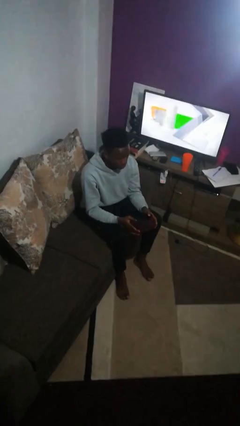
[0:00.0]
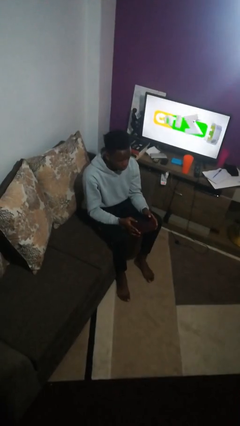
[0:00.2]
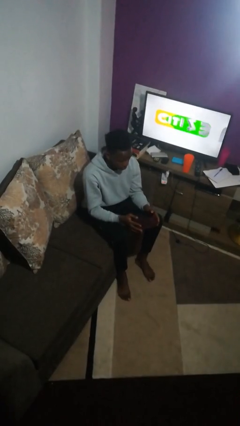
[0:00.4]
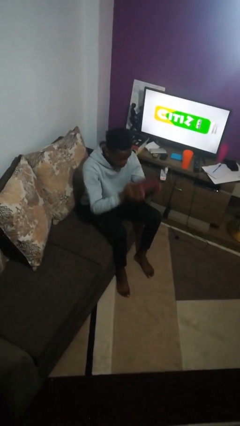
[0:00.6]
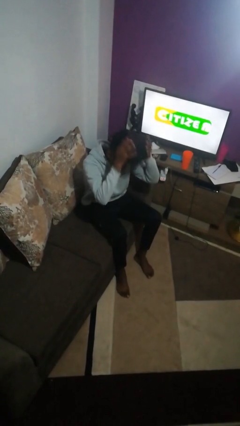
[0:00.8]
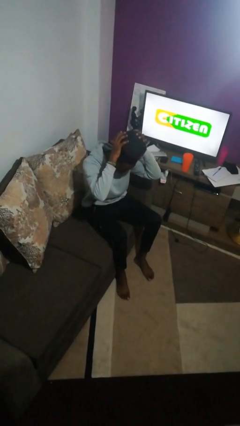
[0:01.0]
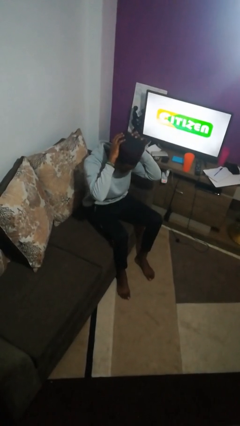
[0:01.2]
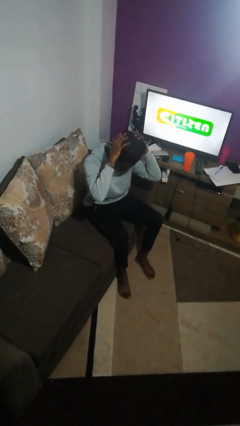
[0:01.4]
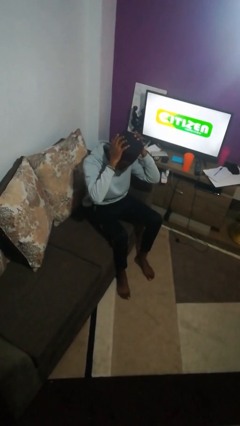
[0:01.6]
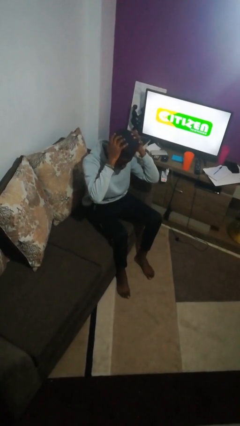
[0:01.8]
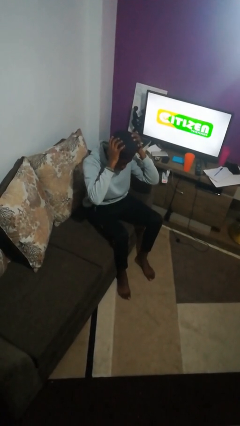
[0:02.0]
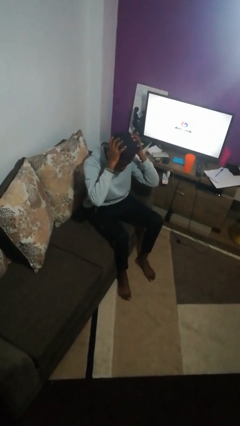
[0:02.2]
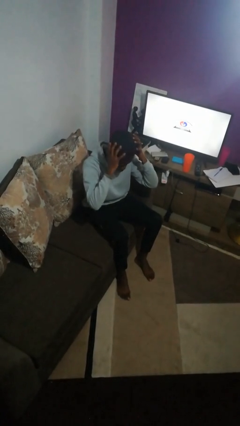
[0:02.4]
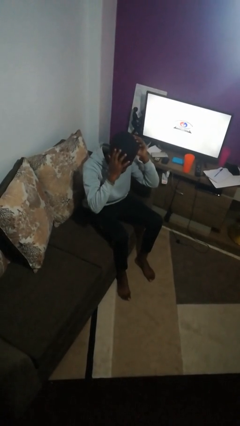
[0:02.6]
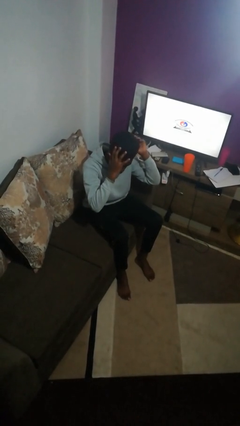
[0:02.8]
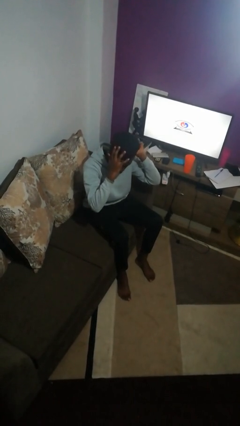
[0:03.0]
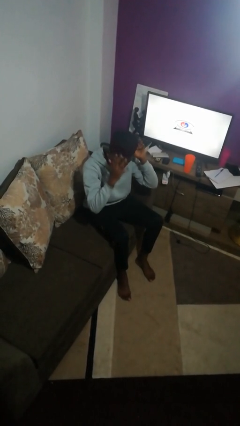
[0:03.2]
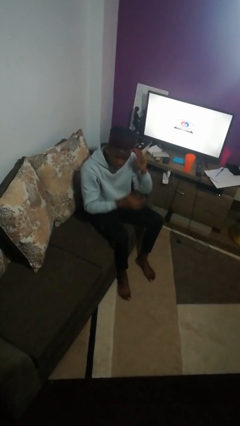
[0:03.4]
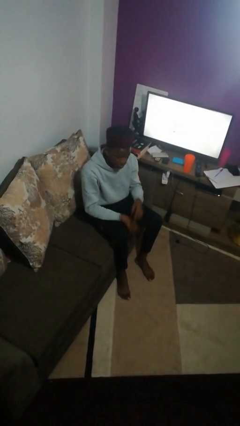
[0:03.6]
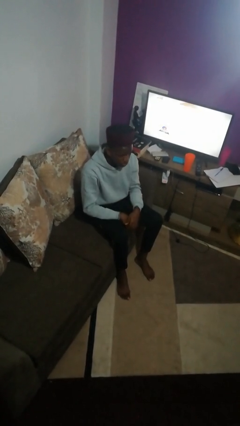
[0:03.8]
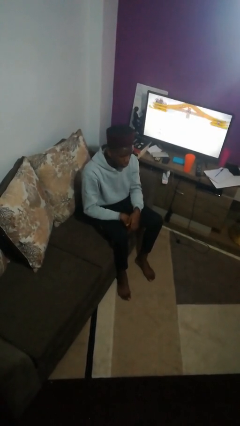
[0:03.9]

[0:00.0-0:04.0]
person puts on hat

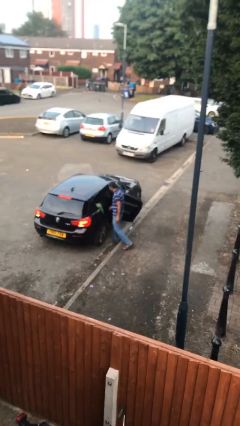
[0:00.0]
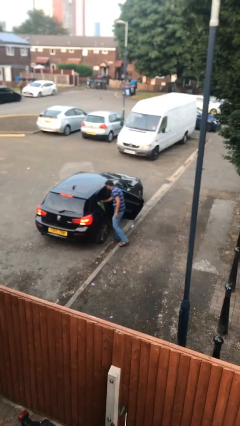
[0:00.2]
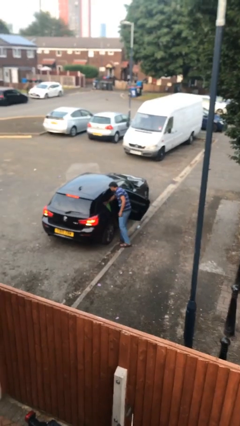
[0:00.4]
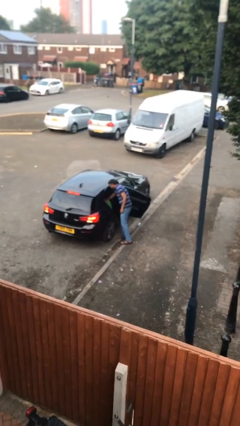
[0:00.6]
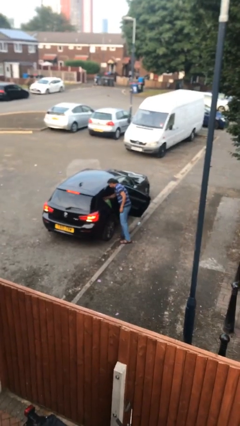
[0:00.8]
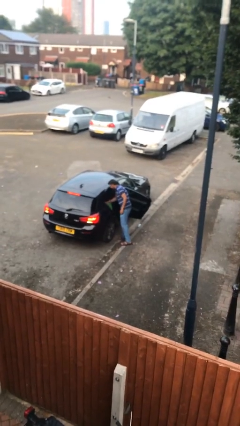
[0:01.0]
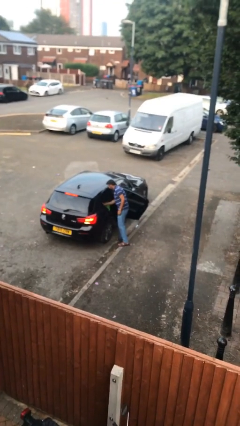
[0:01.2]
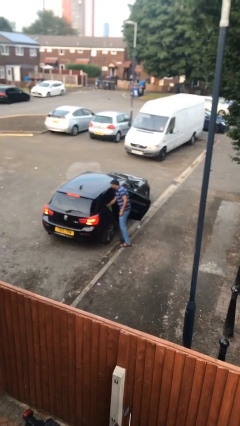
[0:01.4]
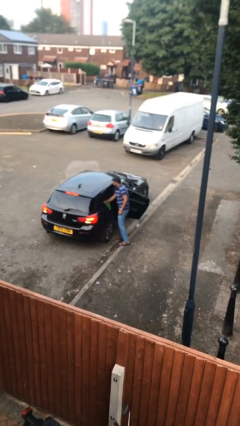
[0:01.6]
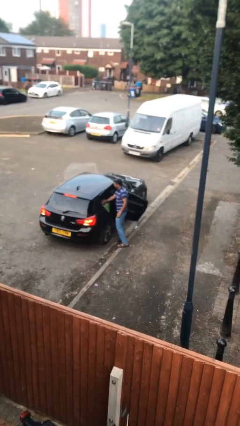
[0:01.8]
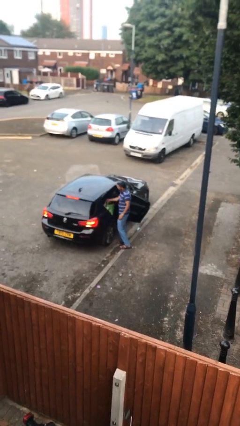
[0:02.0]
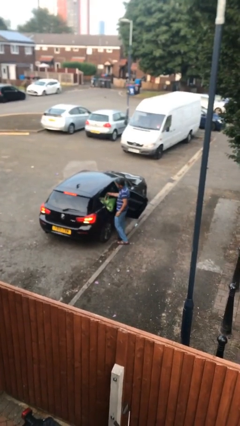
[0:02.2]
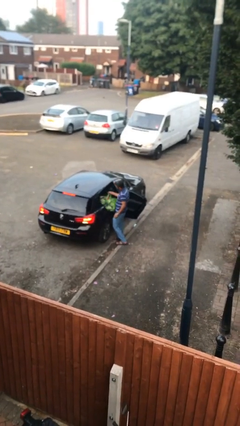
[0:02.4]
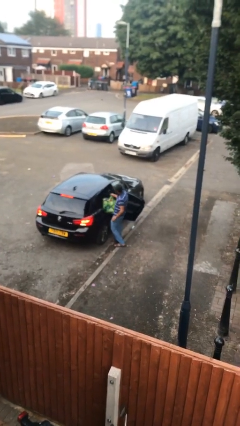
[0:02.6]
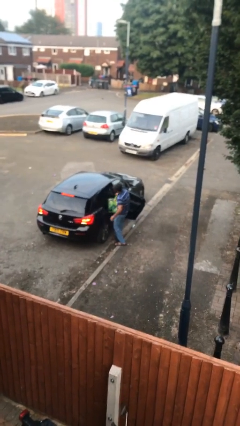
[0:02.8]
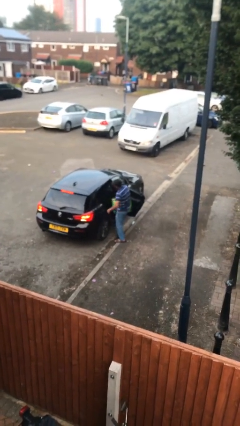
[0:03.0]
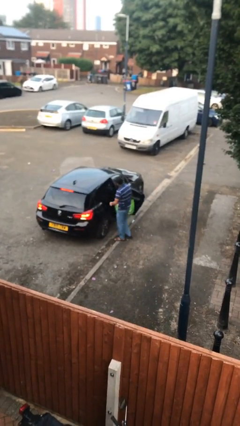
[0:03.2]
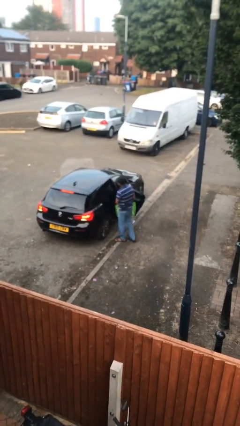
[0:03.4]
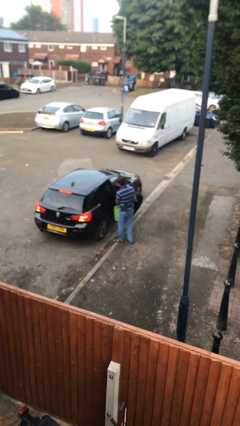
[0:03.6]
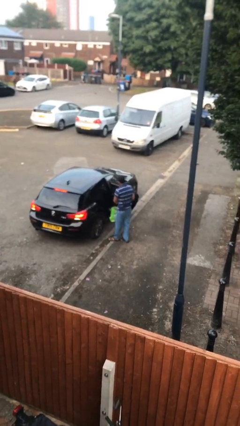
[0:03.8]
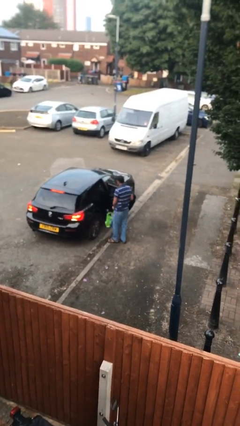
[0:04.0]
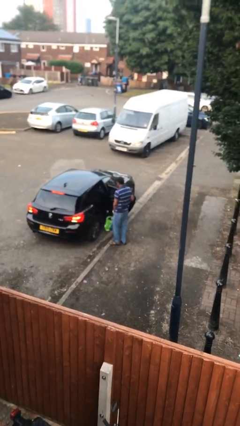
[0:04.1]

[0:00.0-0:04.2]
person unloads car

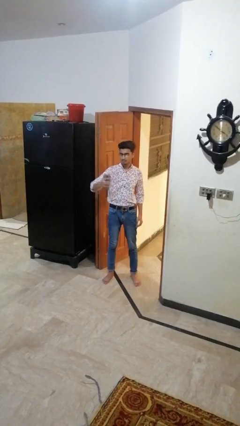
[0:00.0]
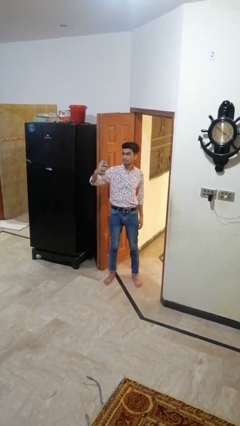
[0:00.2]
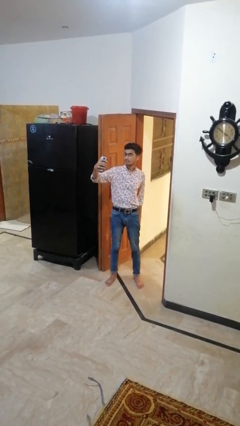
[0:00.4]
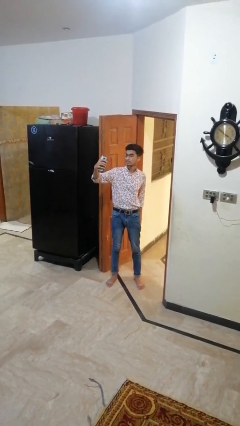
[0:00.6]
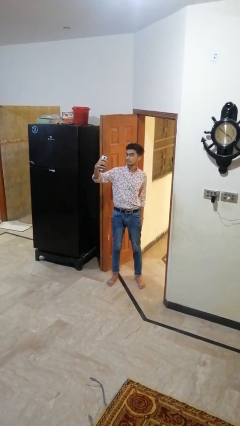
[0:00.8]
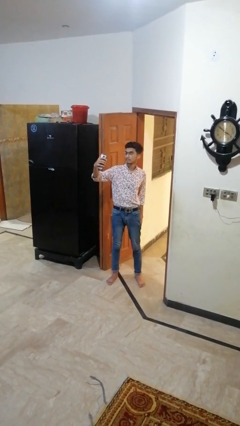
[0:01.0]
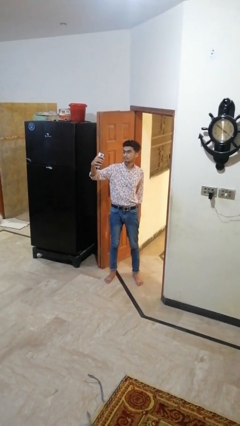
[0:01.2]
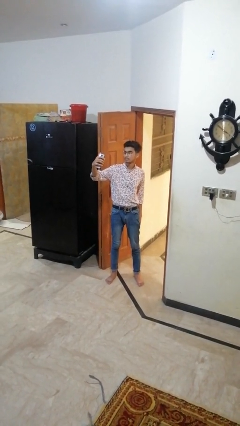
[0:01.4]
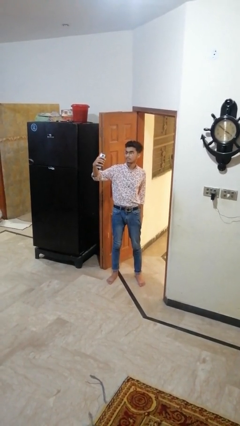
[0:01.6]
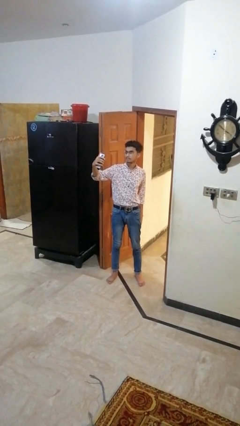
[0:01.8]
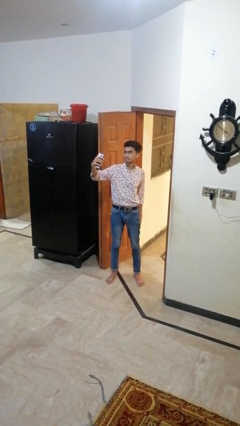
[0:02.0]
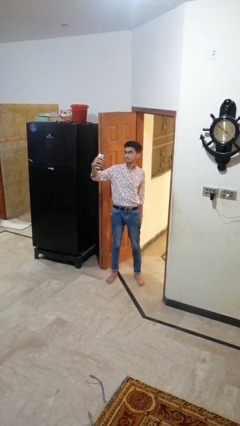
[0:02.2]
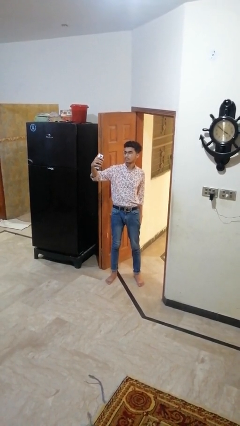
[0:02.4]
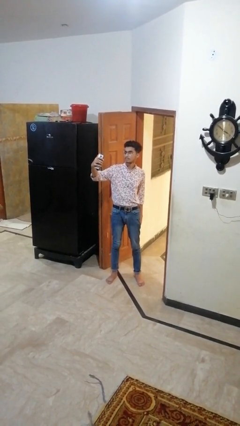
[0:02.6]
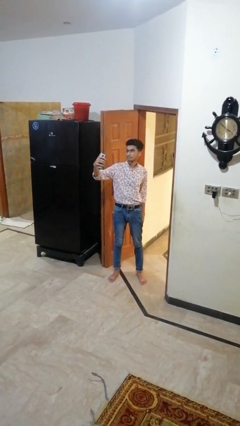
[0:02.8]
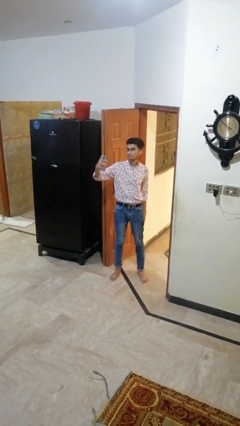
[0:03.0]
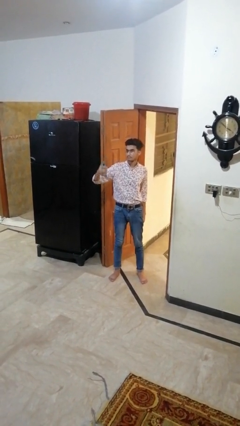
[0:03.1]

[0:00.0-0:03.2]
person takes selfie

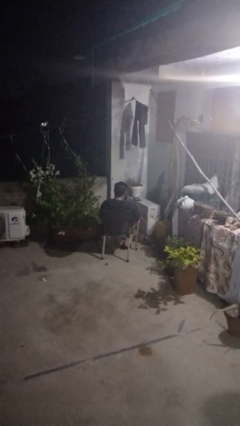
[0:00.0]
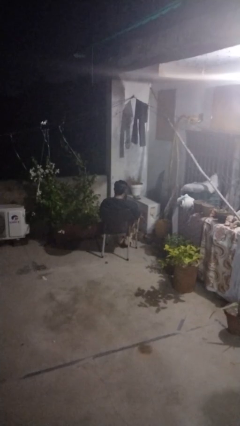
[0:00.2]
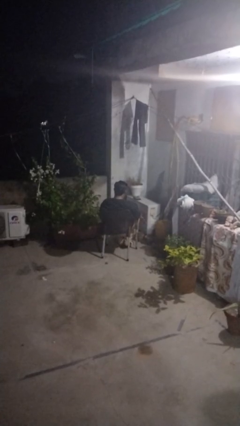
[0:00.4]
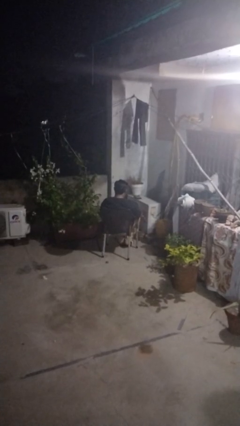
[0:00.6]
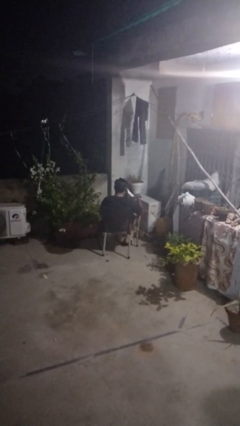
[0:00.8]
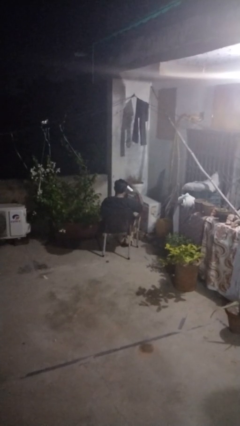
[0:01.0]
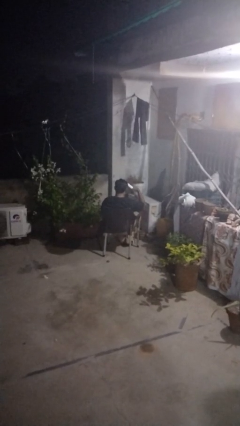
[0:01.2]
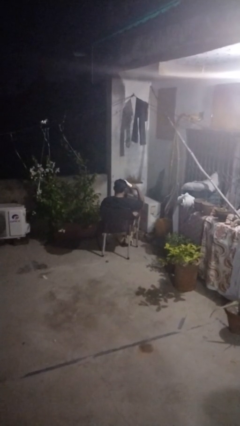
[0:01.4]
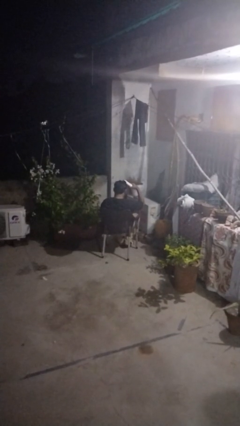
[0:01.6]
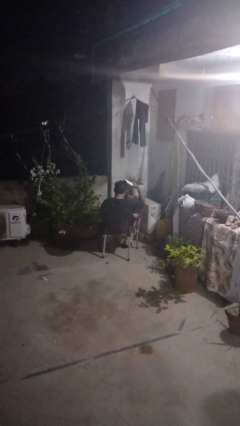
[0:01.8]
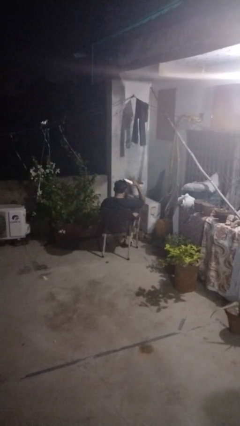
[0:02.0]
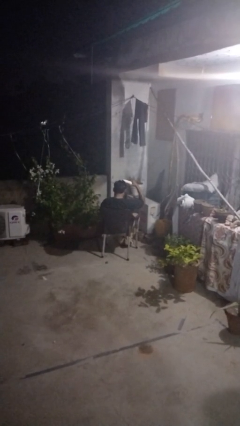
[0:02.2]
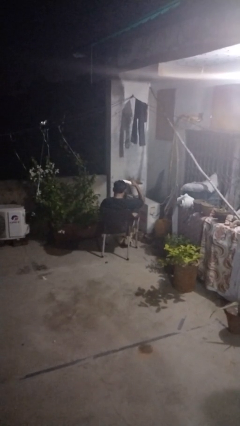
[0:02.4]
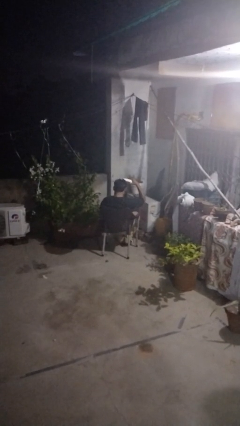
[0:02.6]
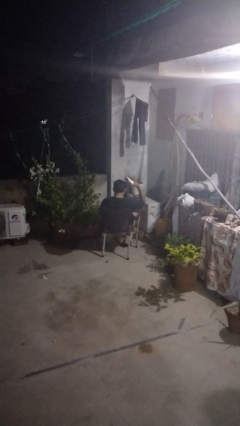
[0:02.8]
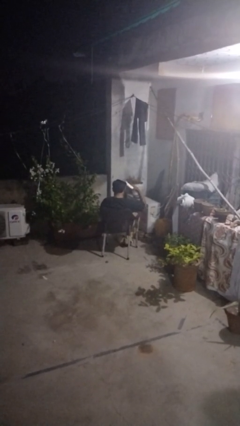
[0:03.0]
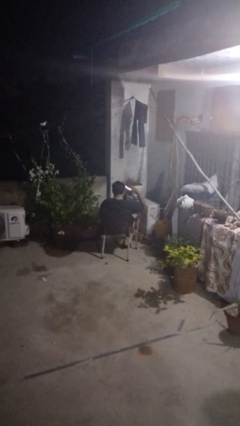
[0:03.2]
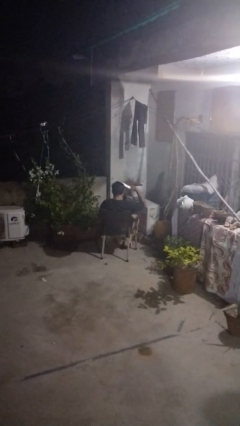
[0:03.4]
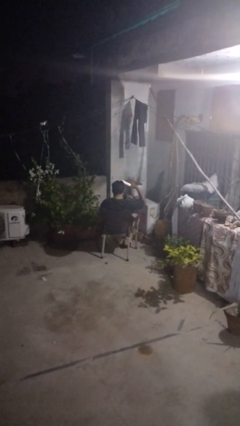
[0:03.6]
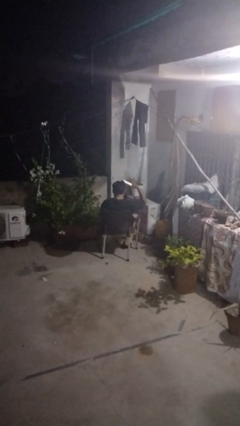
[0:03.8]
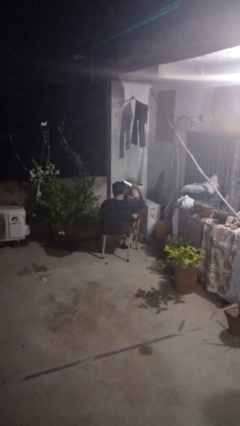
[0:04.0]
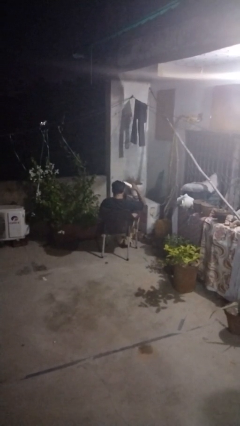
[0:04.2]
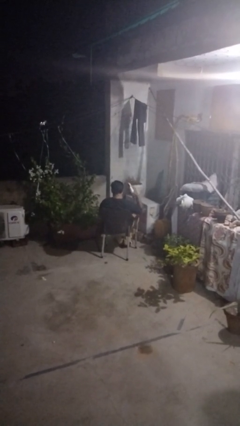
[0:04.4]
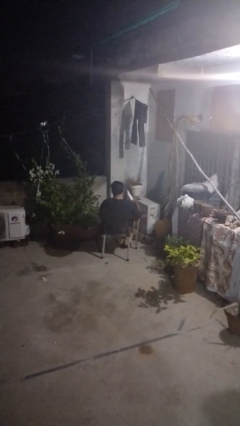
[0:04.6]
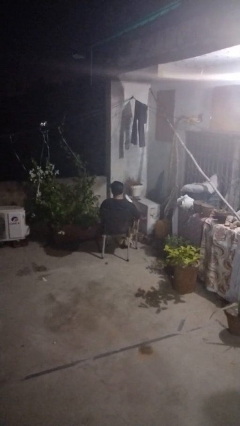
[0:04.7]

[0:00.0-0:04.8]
person dries hair with hairdryer

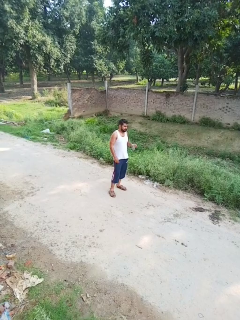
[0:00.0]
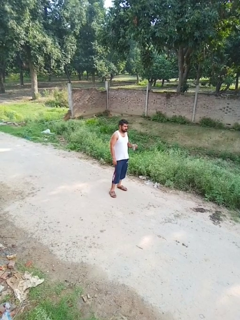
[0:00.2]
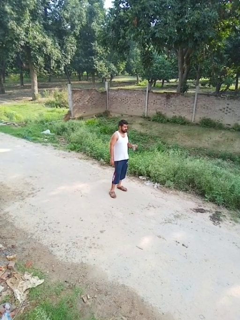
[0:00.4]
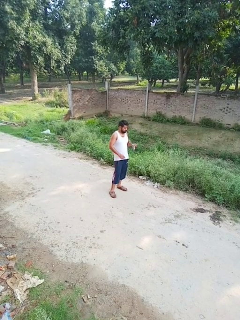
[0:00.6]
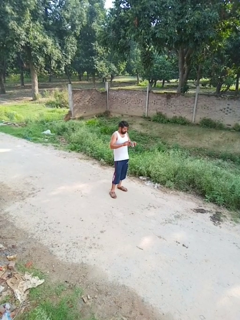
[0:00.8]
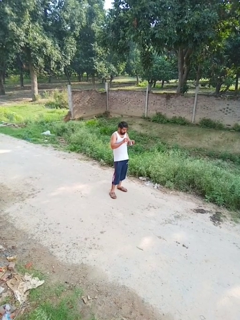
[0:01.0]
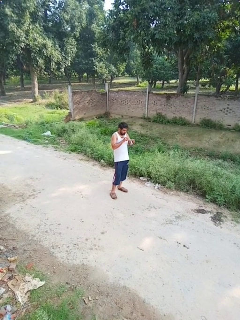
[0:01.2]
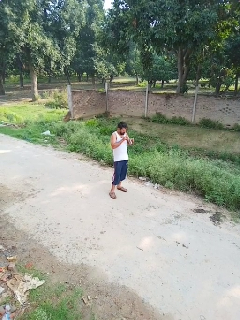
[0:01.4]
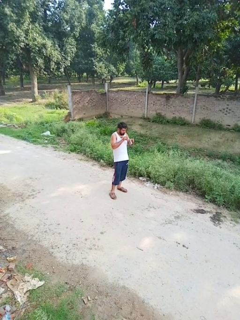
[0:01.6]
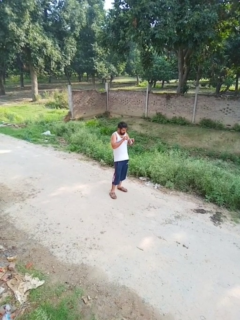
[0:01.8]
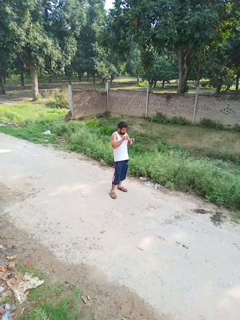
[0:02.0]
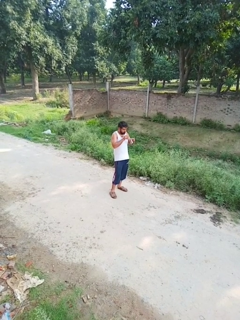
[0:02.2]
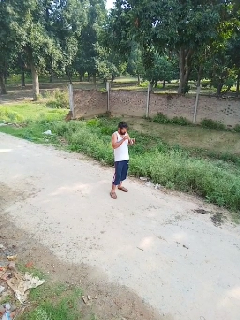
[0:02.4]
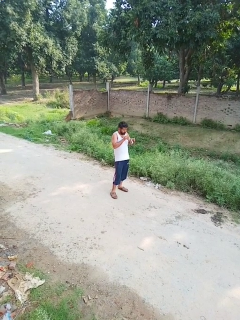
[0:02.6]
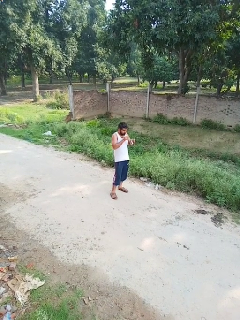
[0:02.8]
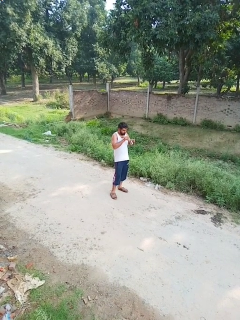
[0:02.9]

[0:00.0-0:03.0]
person drinks from straw
